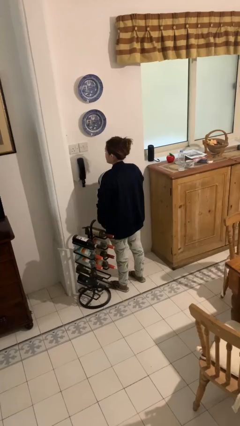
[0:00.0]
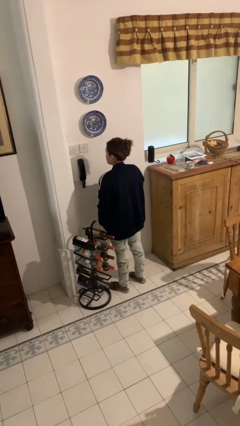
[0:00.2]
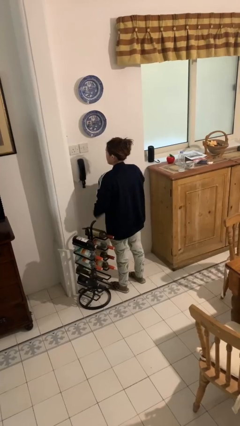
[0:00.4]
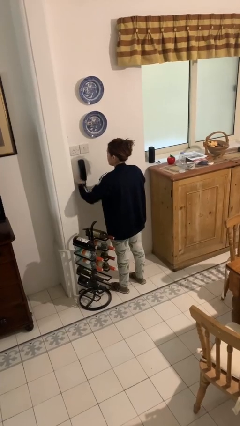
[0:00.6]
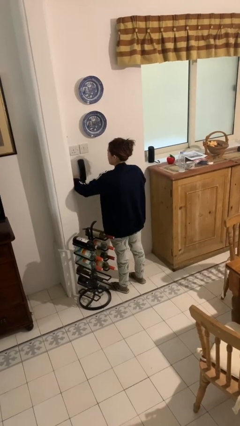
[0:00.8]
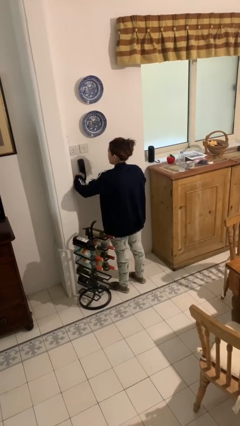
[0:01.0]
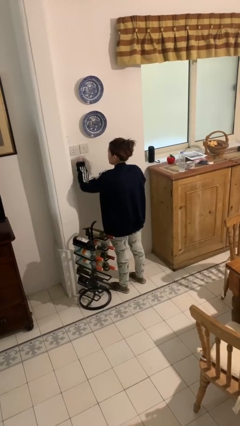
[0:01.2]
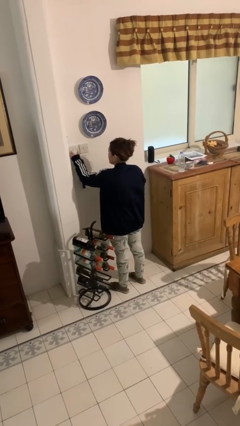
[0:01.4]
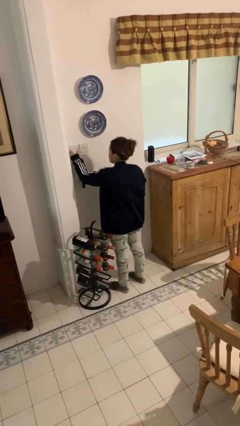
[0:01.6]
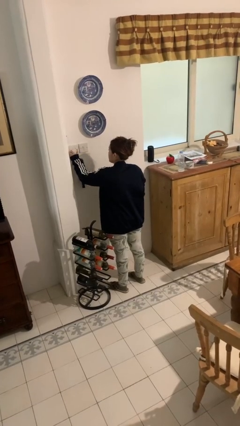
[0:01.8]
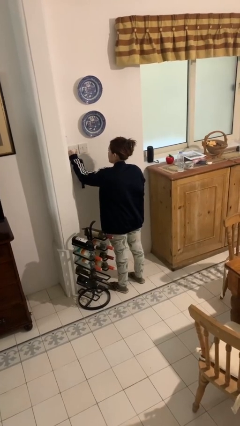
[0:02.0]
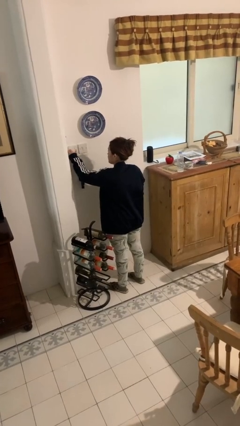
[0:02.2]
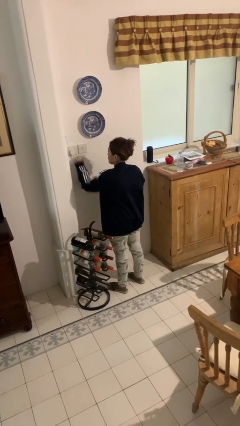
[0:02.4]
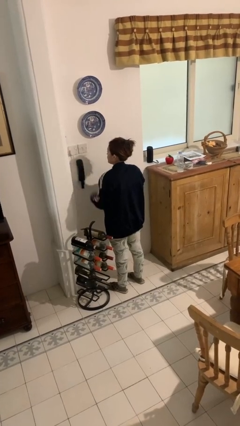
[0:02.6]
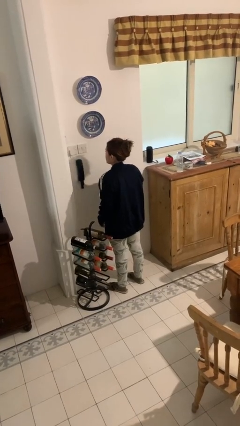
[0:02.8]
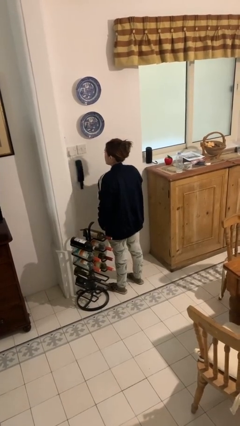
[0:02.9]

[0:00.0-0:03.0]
person plugs into electrical socket

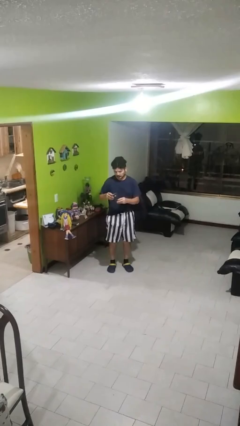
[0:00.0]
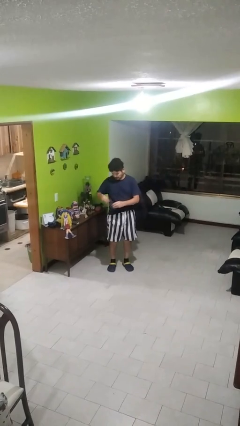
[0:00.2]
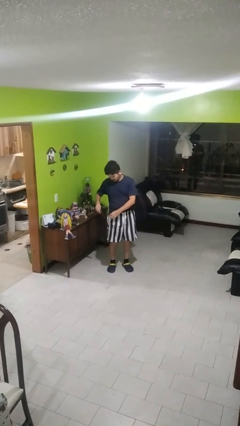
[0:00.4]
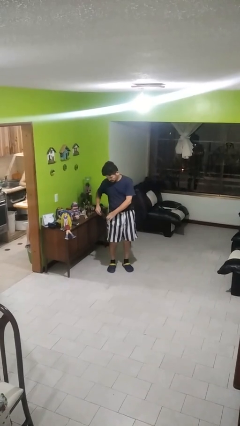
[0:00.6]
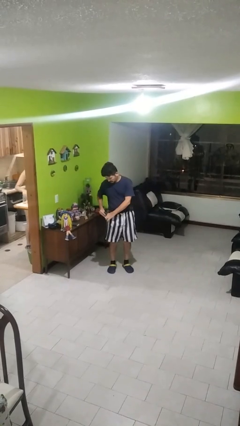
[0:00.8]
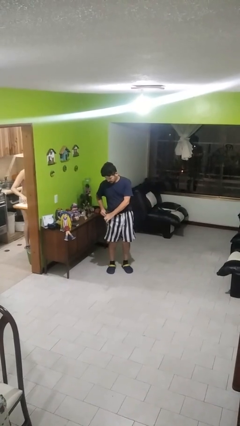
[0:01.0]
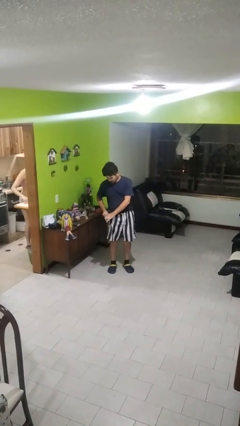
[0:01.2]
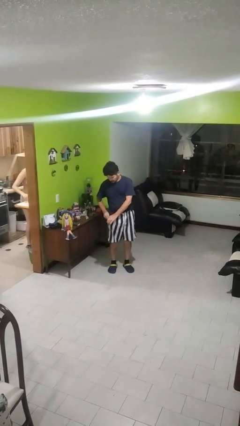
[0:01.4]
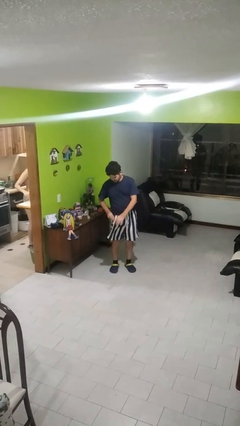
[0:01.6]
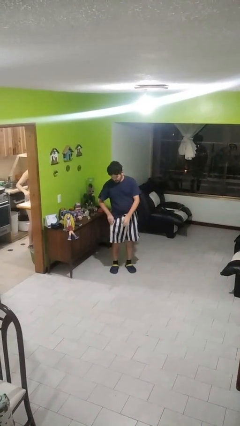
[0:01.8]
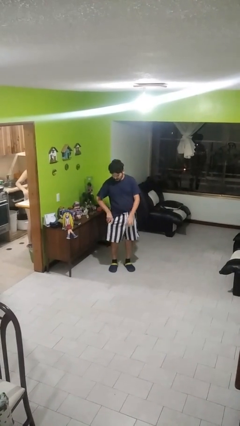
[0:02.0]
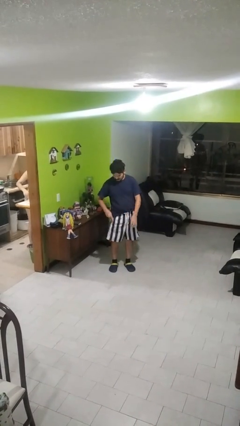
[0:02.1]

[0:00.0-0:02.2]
person puts phone into pocket

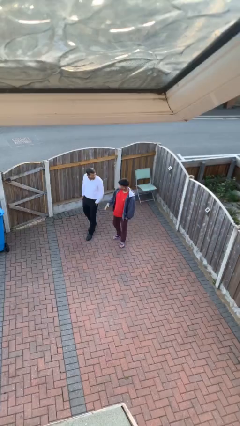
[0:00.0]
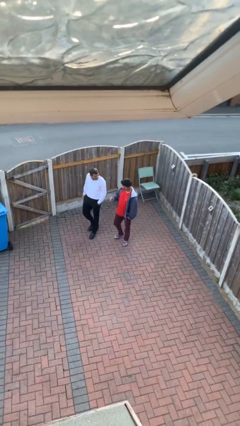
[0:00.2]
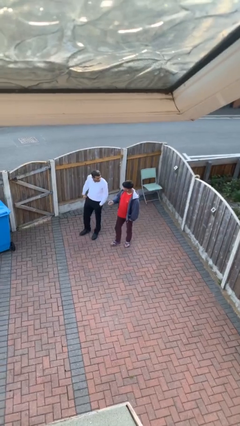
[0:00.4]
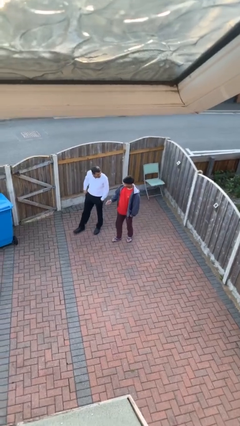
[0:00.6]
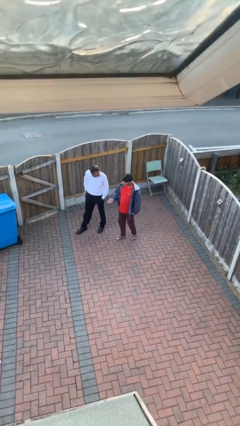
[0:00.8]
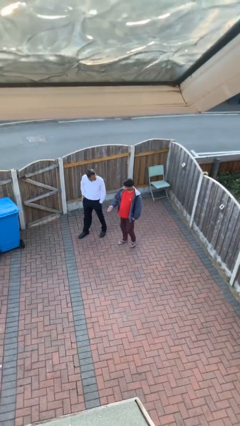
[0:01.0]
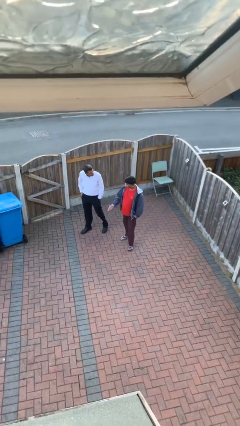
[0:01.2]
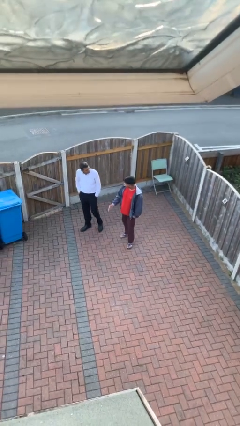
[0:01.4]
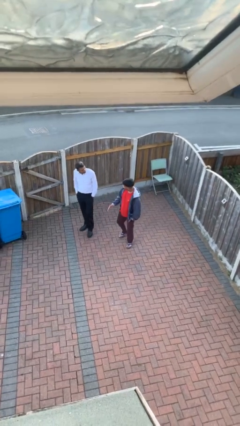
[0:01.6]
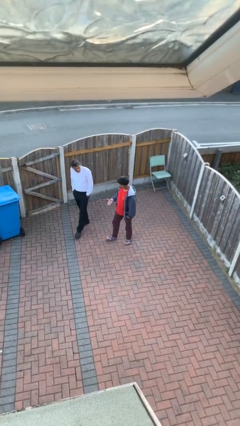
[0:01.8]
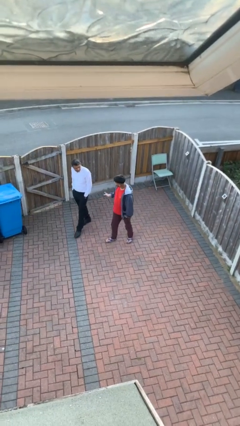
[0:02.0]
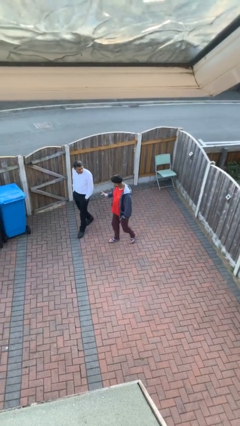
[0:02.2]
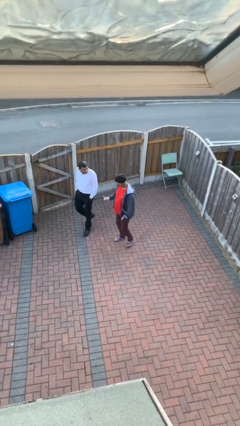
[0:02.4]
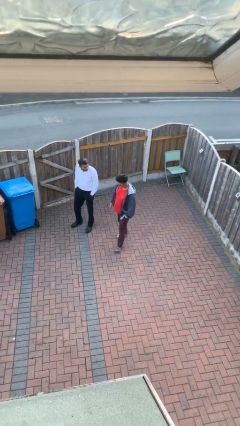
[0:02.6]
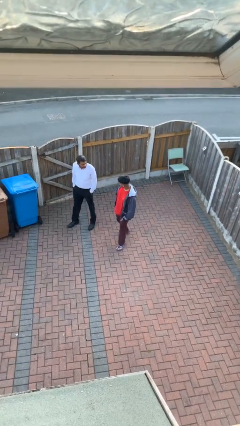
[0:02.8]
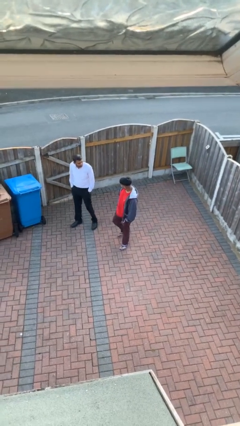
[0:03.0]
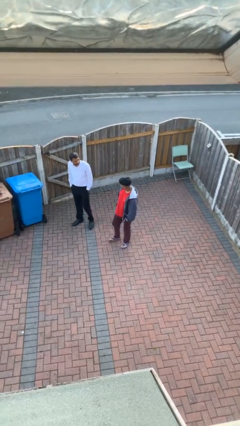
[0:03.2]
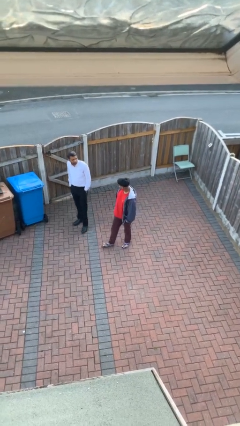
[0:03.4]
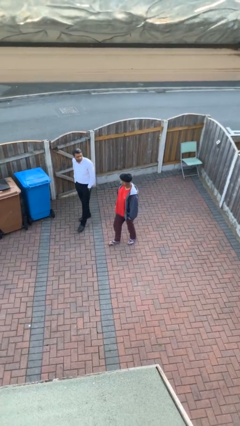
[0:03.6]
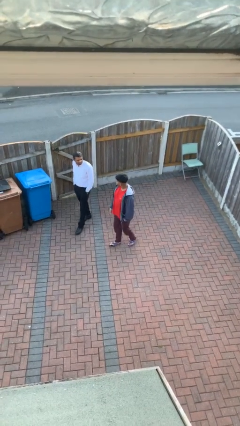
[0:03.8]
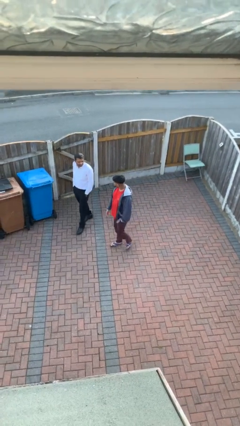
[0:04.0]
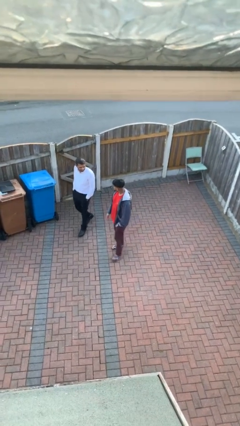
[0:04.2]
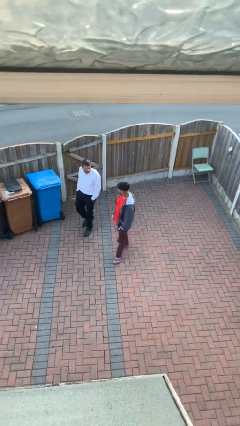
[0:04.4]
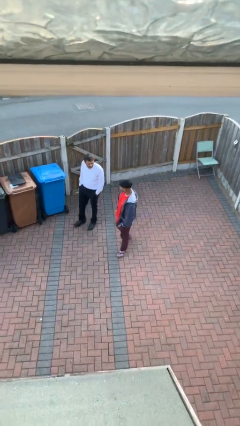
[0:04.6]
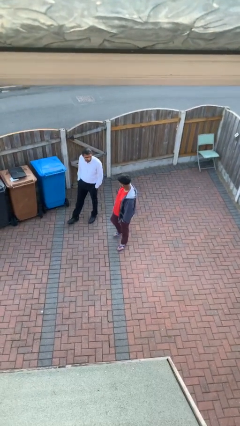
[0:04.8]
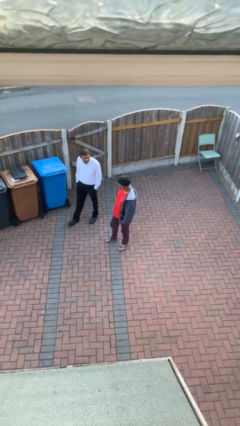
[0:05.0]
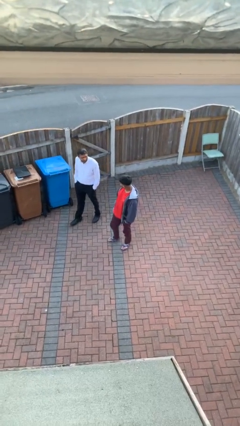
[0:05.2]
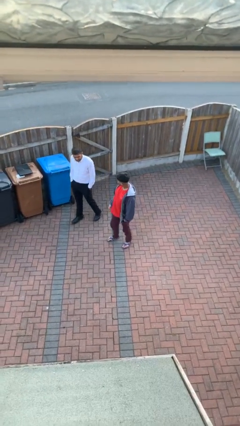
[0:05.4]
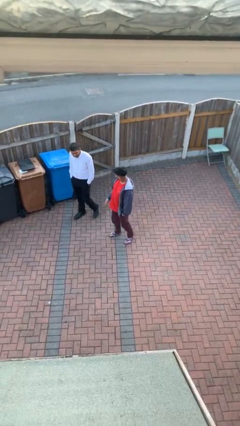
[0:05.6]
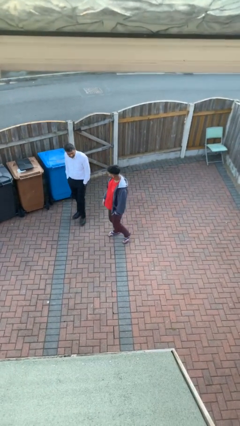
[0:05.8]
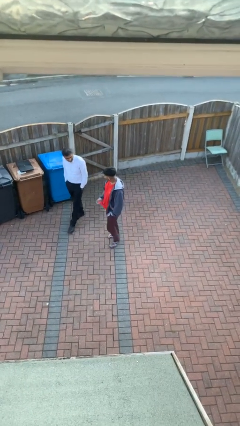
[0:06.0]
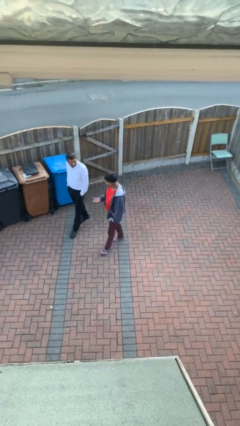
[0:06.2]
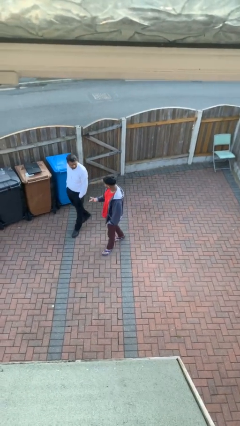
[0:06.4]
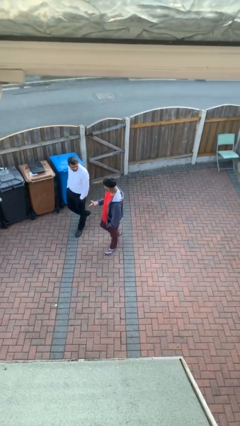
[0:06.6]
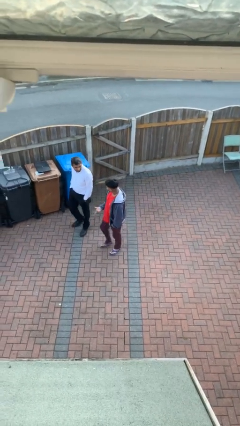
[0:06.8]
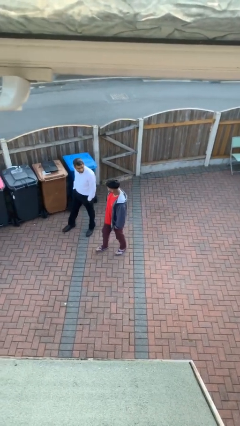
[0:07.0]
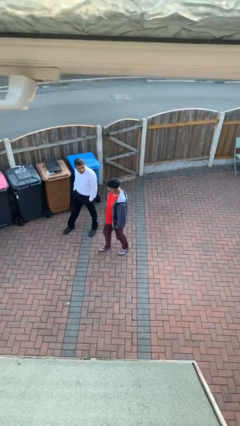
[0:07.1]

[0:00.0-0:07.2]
person talks to person

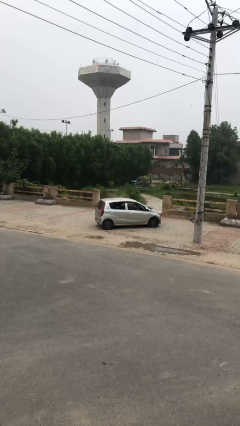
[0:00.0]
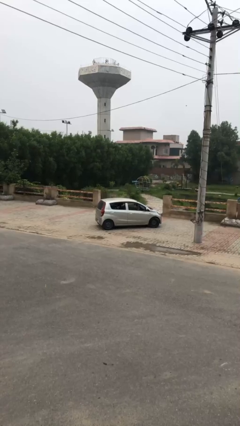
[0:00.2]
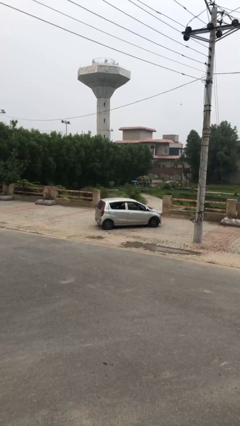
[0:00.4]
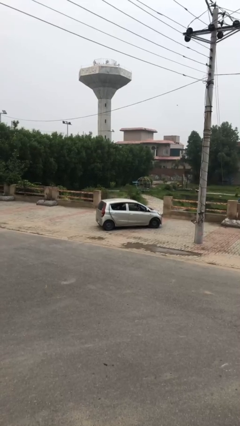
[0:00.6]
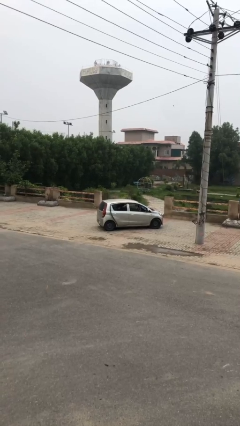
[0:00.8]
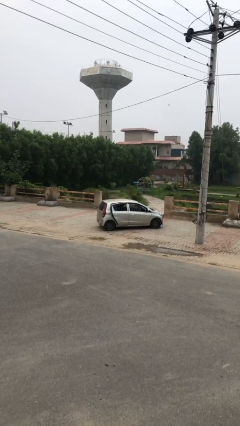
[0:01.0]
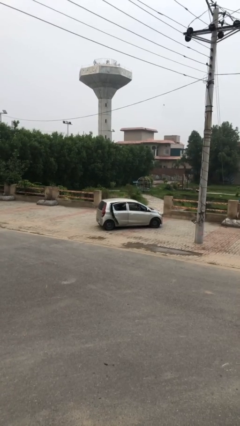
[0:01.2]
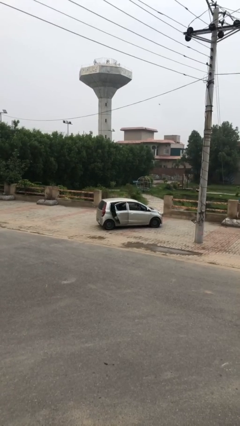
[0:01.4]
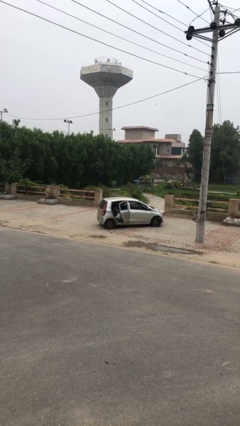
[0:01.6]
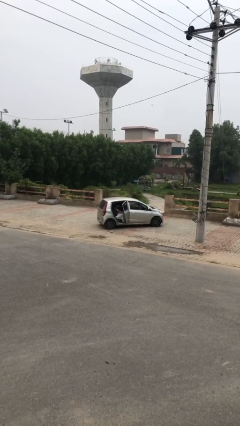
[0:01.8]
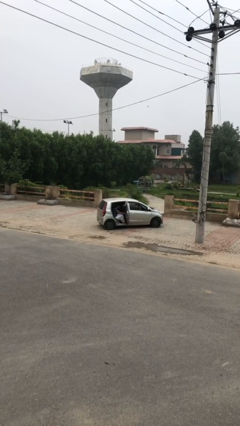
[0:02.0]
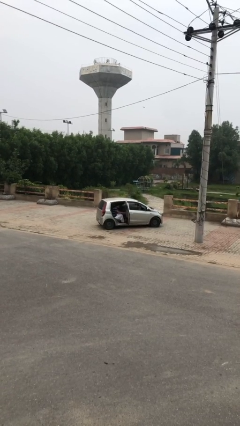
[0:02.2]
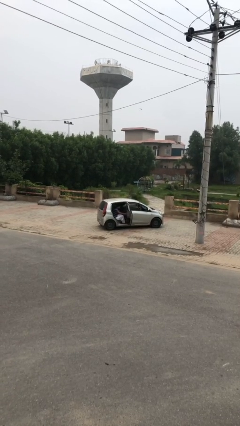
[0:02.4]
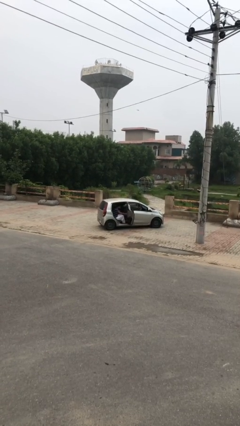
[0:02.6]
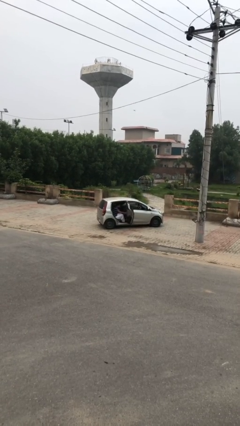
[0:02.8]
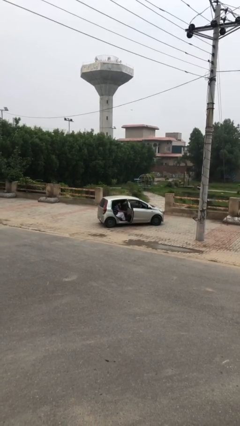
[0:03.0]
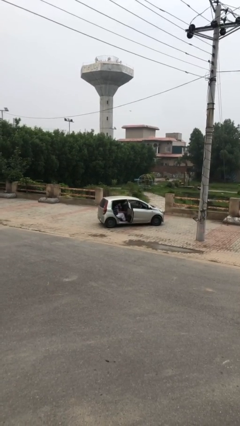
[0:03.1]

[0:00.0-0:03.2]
person opens car door

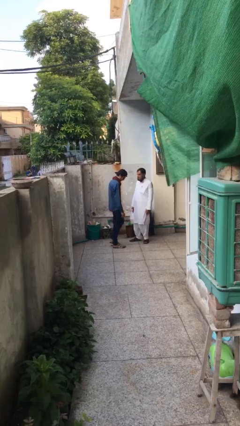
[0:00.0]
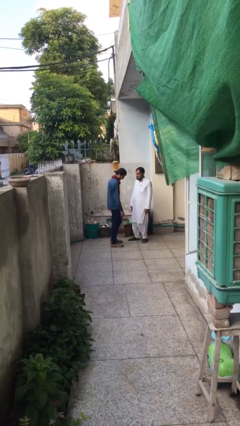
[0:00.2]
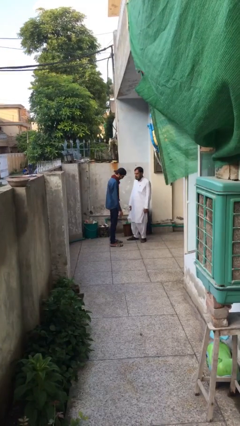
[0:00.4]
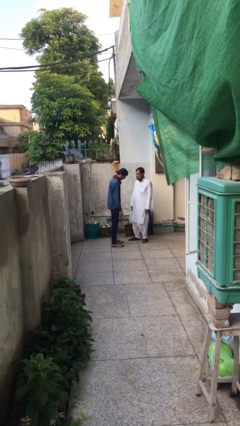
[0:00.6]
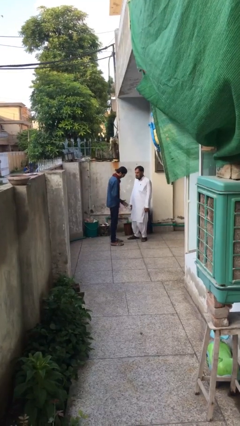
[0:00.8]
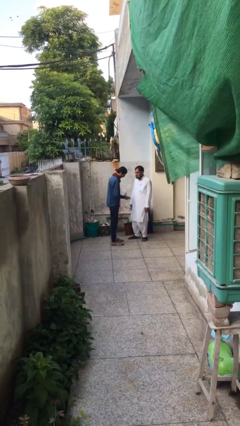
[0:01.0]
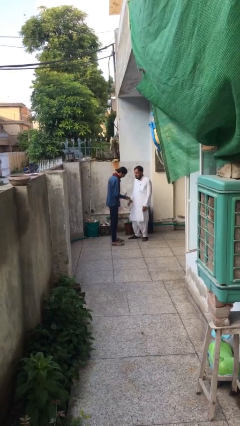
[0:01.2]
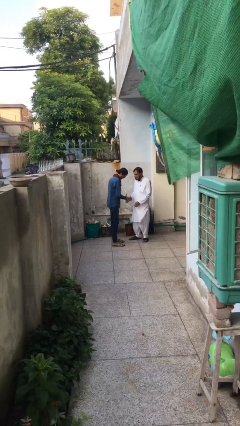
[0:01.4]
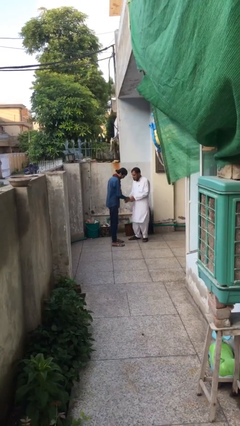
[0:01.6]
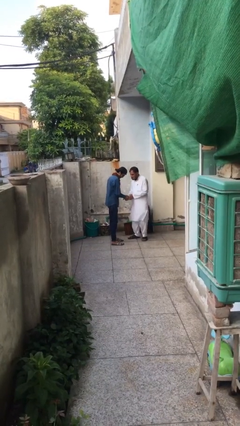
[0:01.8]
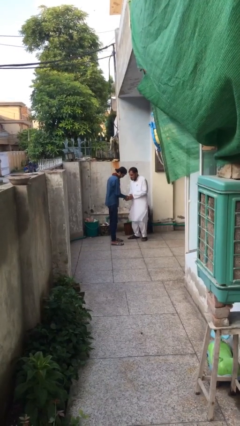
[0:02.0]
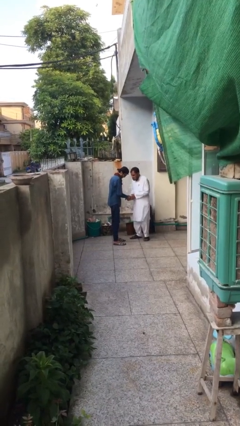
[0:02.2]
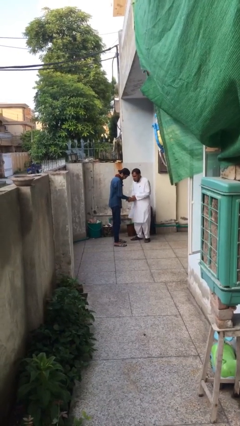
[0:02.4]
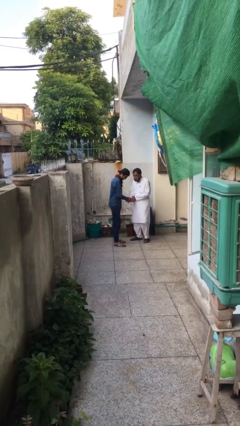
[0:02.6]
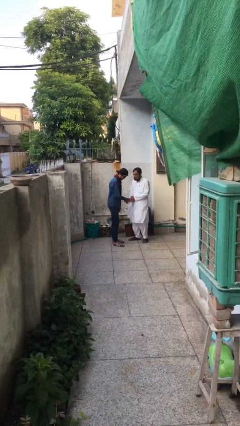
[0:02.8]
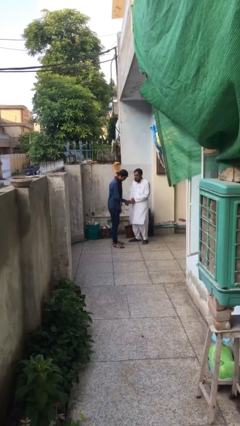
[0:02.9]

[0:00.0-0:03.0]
person shakes hand
